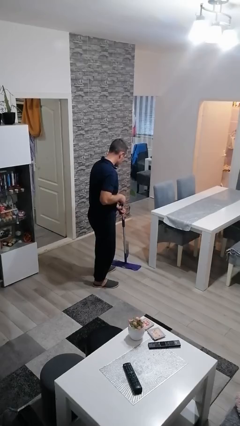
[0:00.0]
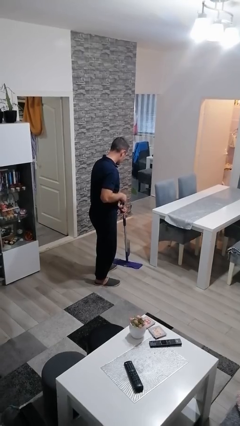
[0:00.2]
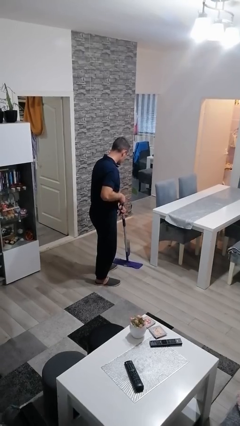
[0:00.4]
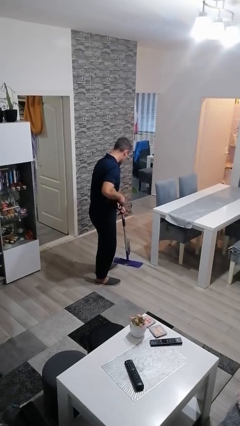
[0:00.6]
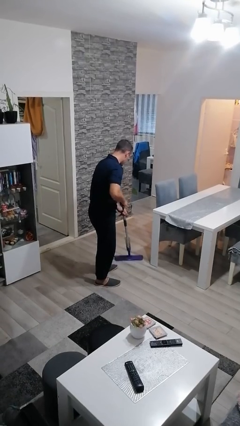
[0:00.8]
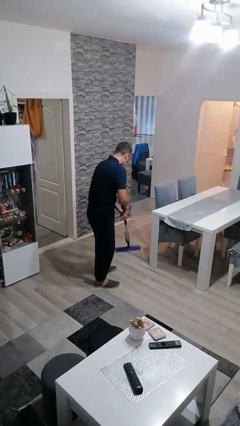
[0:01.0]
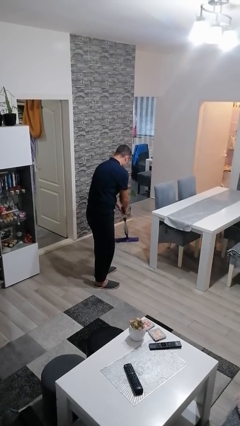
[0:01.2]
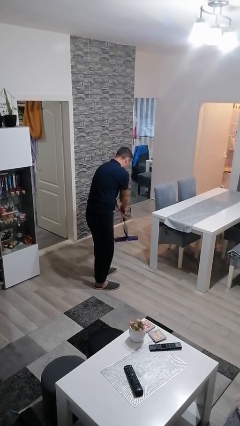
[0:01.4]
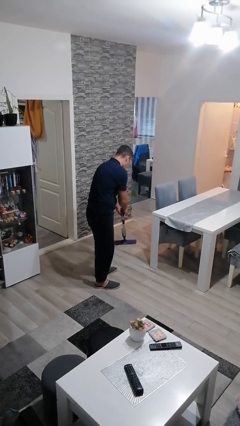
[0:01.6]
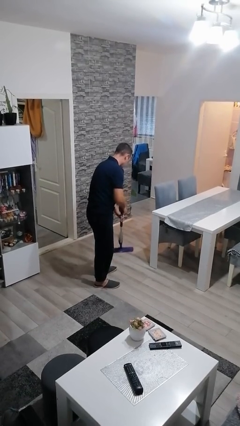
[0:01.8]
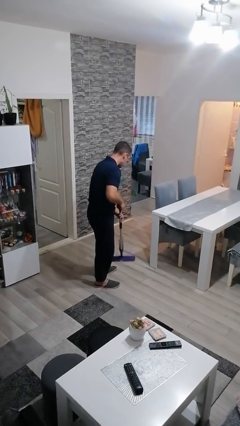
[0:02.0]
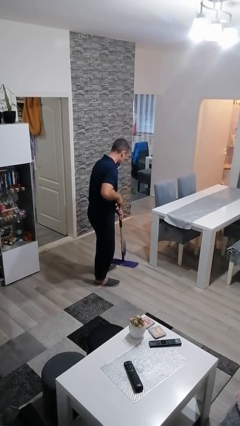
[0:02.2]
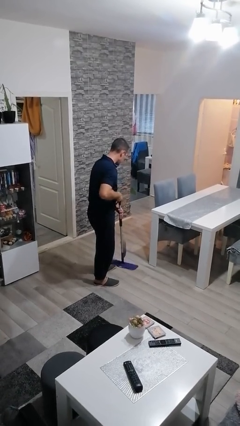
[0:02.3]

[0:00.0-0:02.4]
person mops

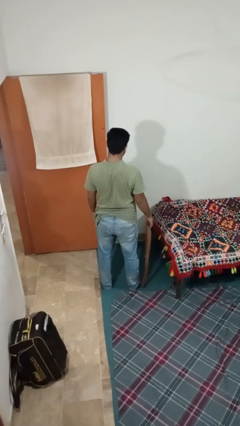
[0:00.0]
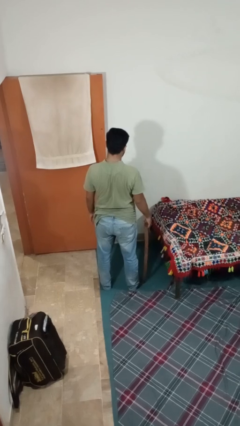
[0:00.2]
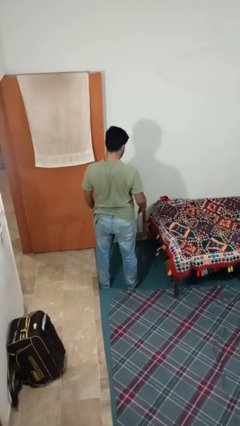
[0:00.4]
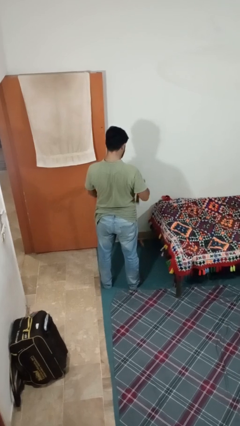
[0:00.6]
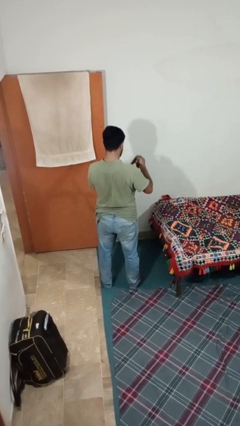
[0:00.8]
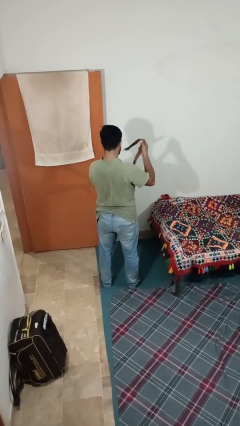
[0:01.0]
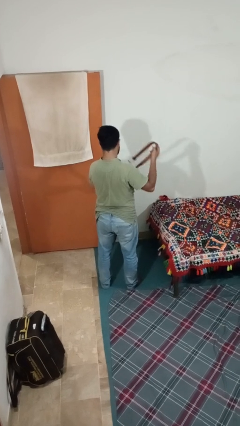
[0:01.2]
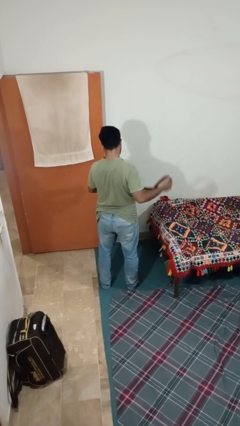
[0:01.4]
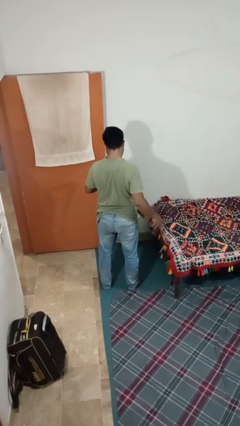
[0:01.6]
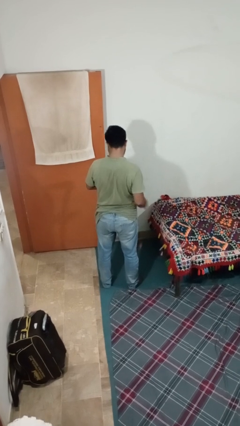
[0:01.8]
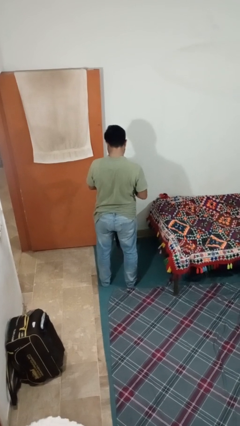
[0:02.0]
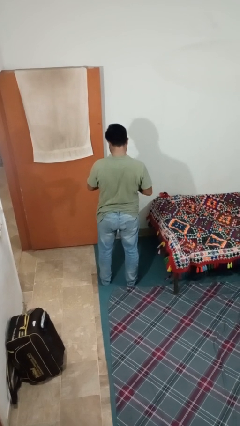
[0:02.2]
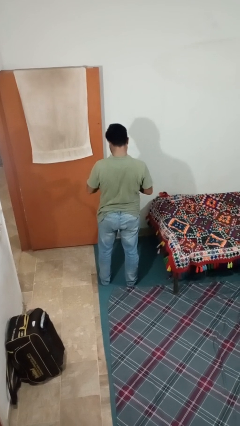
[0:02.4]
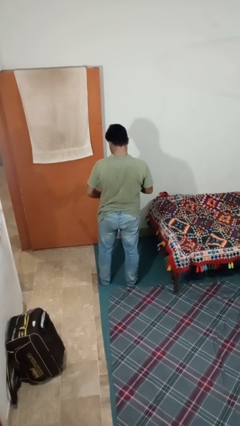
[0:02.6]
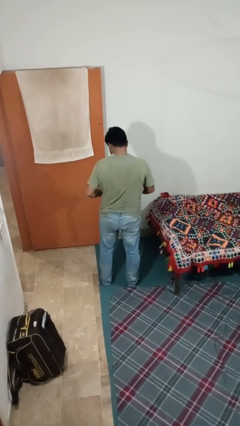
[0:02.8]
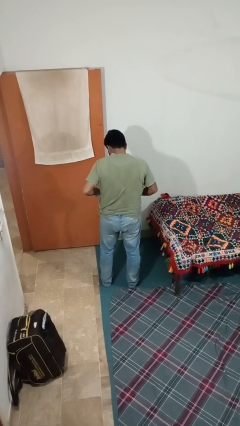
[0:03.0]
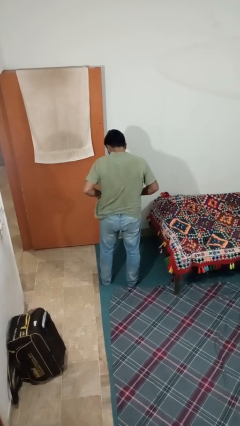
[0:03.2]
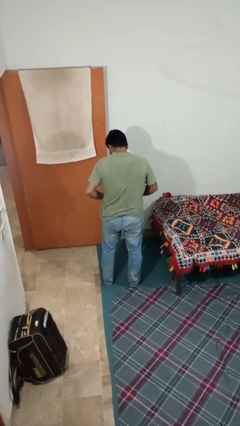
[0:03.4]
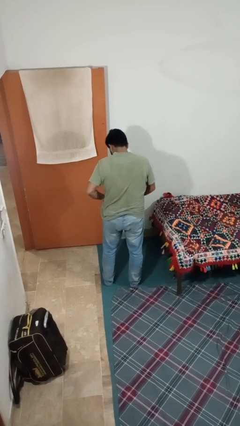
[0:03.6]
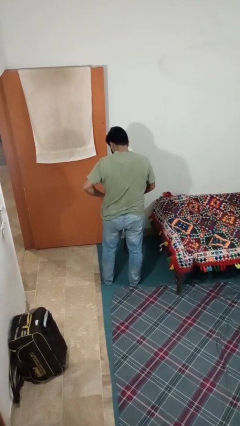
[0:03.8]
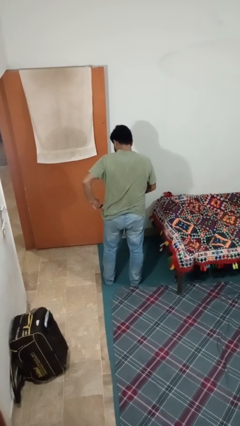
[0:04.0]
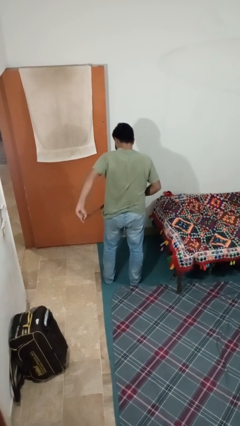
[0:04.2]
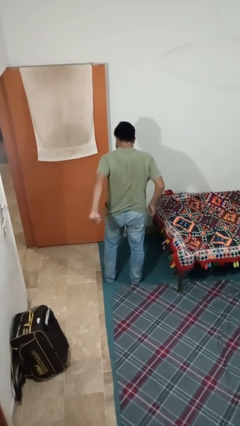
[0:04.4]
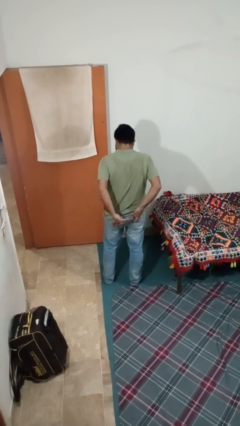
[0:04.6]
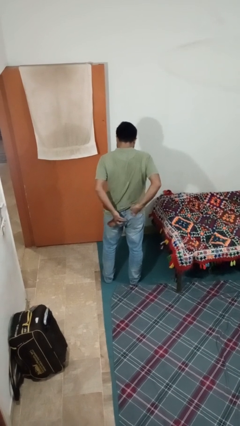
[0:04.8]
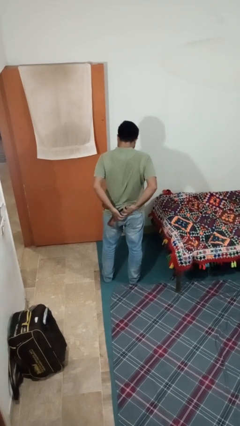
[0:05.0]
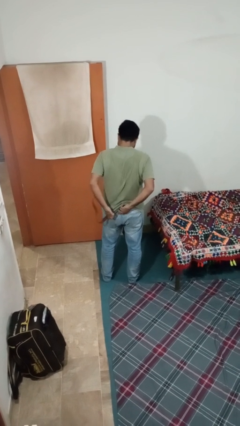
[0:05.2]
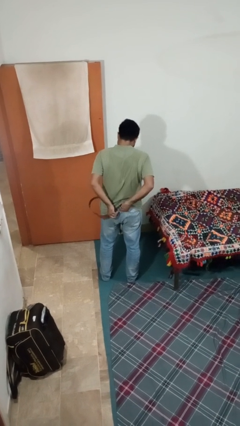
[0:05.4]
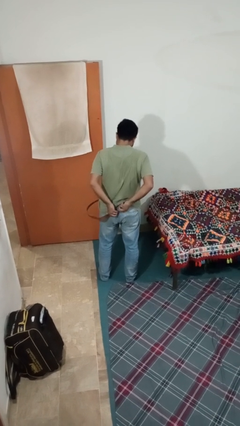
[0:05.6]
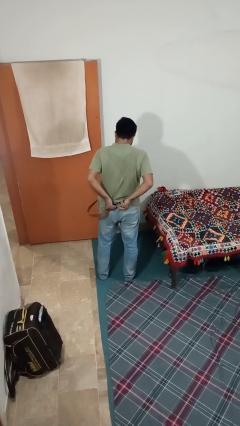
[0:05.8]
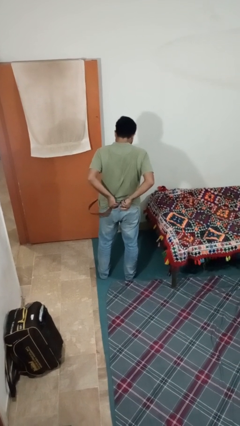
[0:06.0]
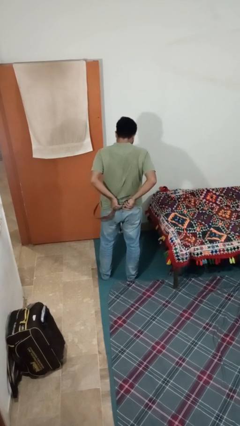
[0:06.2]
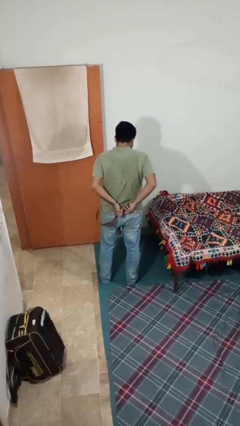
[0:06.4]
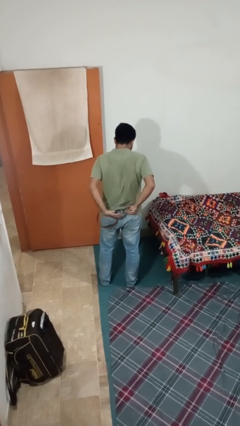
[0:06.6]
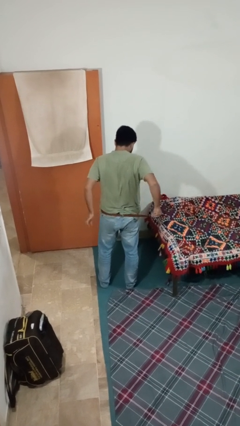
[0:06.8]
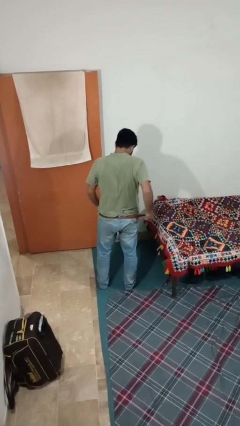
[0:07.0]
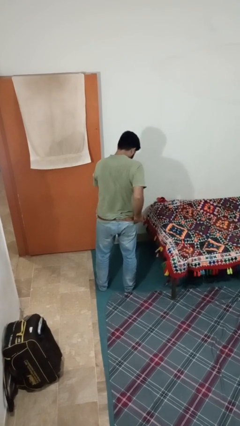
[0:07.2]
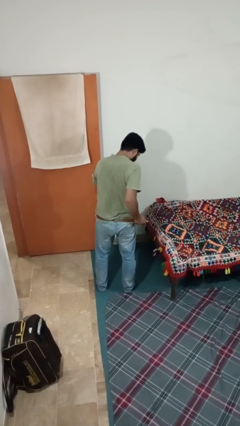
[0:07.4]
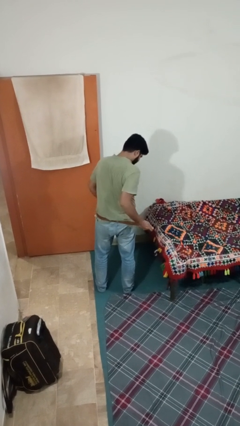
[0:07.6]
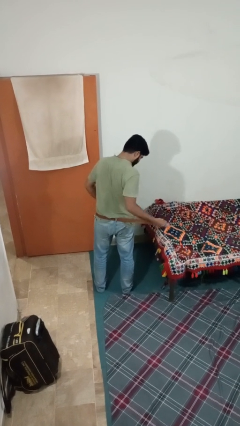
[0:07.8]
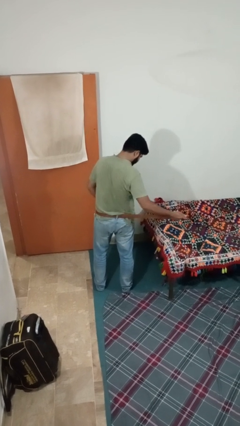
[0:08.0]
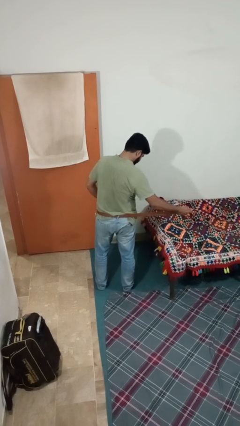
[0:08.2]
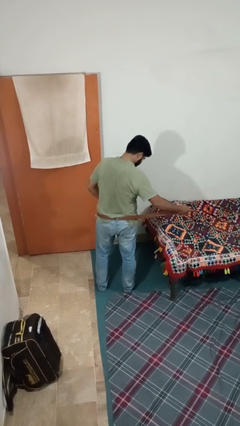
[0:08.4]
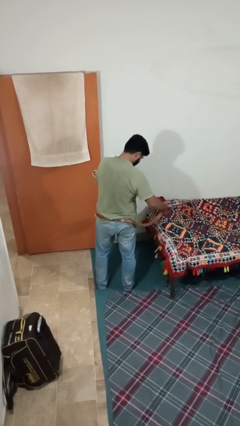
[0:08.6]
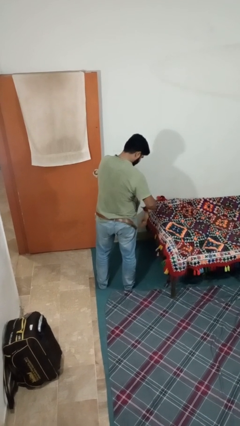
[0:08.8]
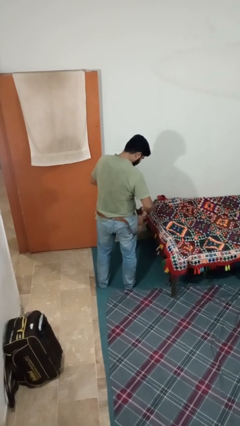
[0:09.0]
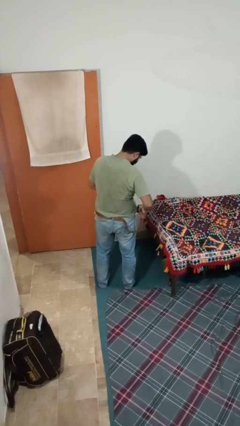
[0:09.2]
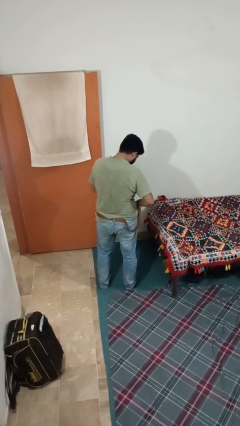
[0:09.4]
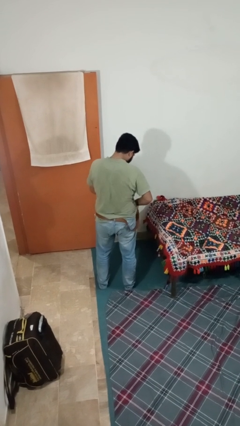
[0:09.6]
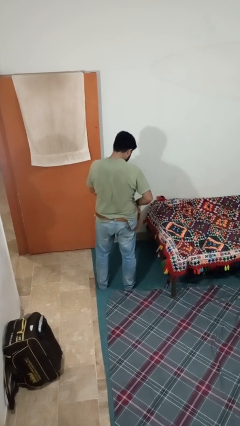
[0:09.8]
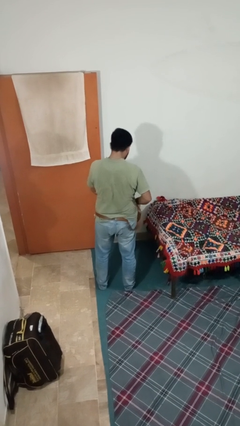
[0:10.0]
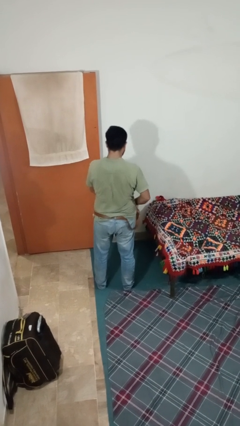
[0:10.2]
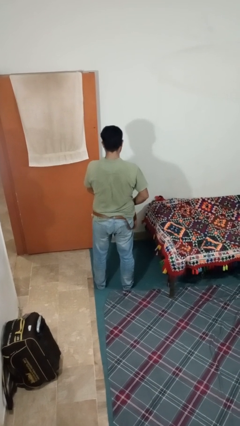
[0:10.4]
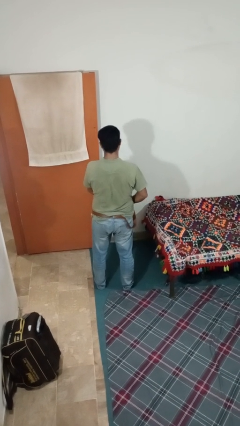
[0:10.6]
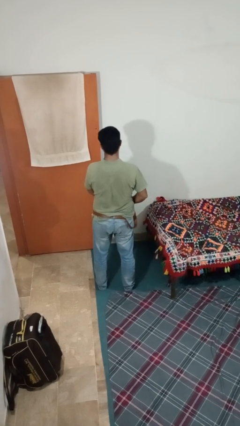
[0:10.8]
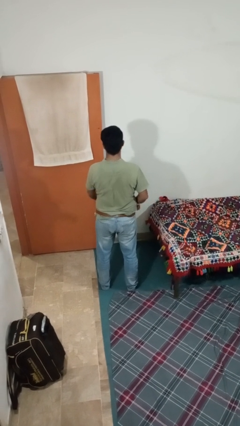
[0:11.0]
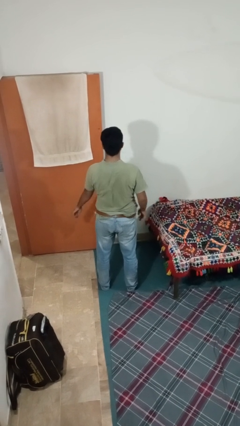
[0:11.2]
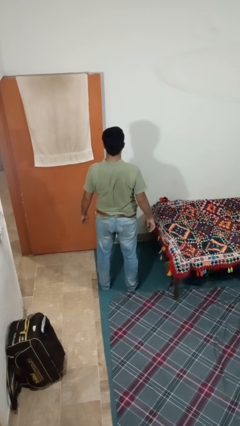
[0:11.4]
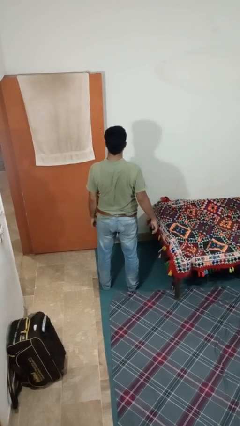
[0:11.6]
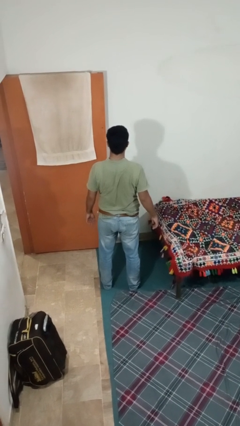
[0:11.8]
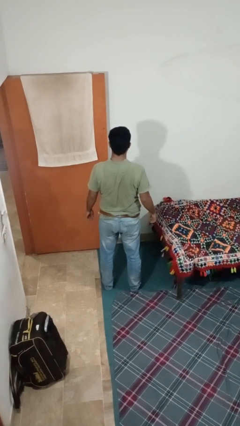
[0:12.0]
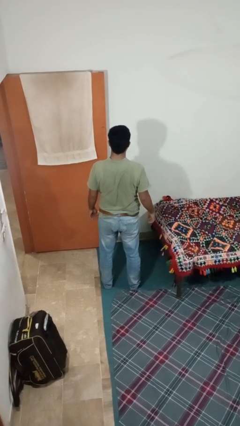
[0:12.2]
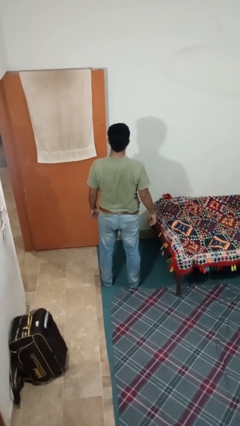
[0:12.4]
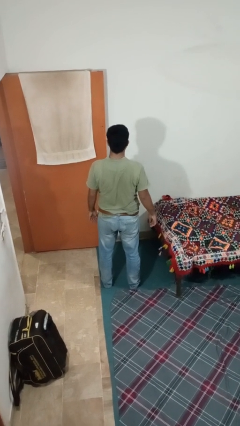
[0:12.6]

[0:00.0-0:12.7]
person puts on belt

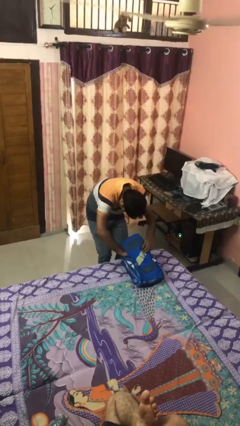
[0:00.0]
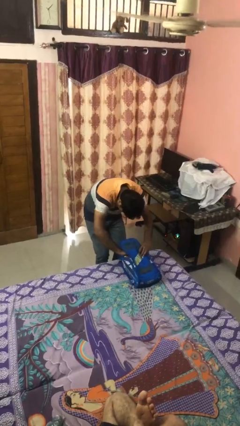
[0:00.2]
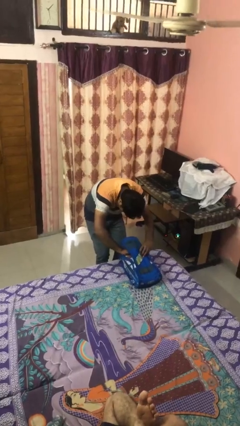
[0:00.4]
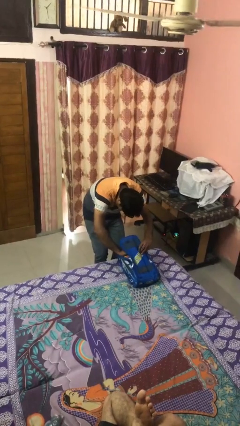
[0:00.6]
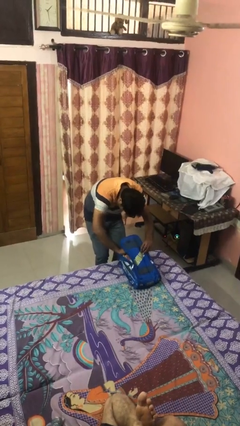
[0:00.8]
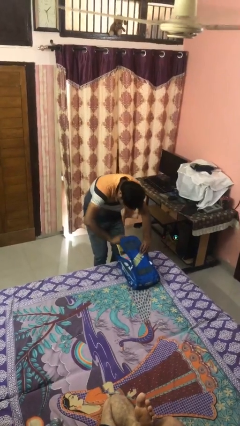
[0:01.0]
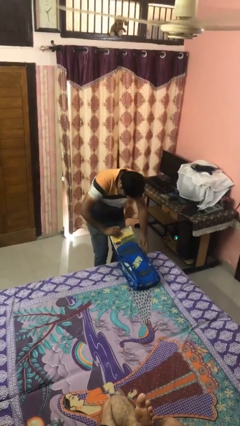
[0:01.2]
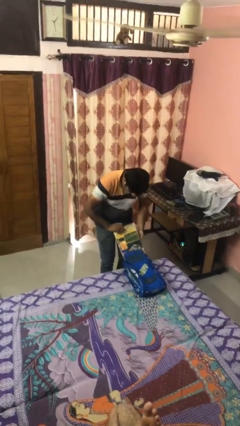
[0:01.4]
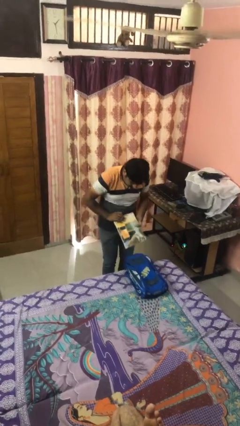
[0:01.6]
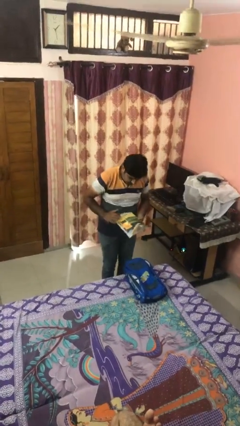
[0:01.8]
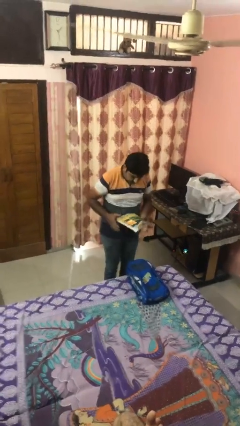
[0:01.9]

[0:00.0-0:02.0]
person takes object from backpack

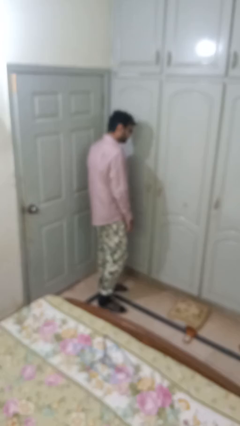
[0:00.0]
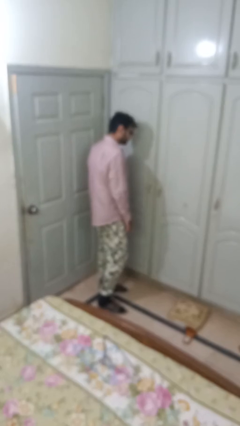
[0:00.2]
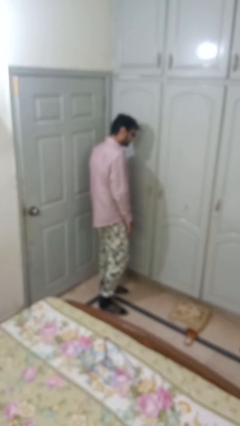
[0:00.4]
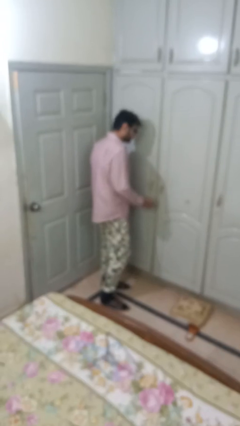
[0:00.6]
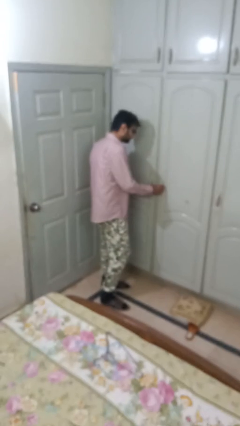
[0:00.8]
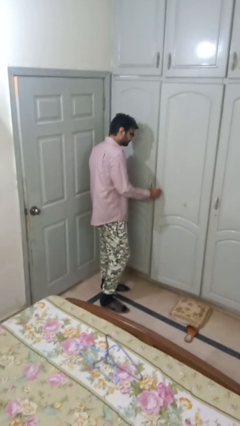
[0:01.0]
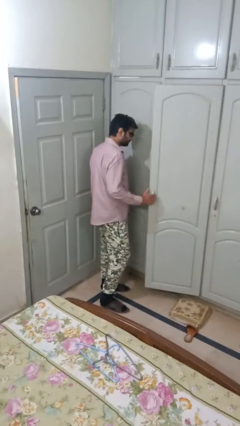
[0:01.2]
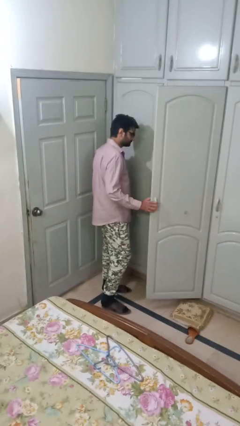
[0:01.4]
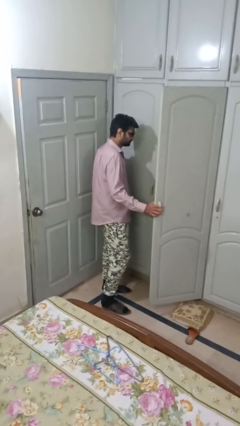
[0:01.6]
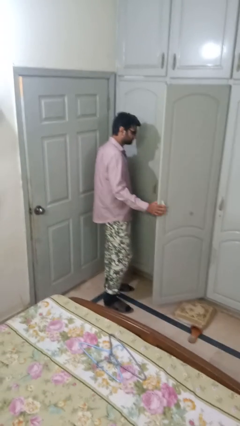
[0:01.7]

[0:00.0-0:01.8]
person opens closet door
